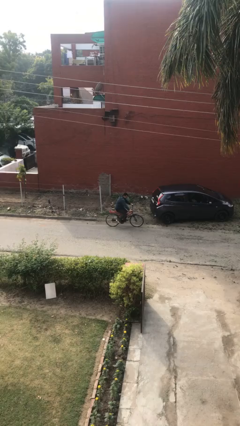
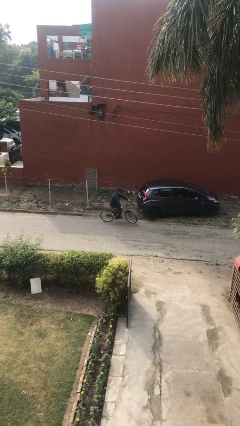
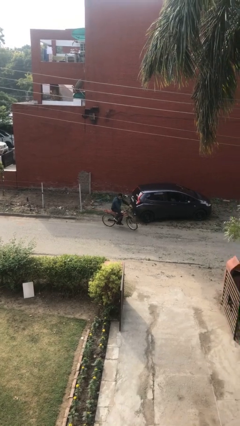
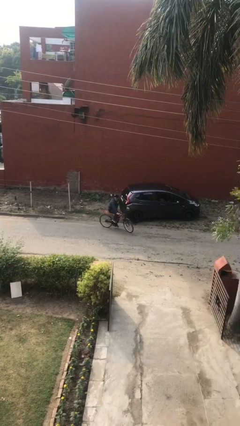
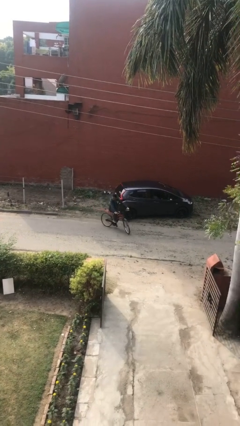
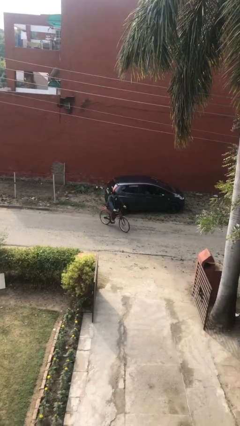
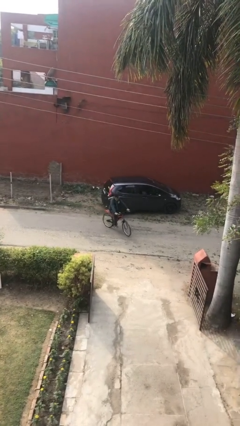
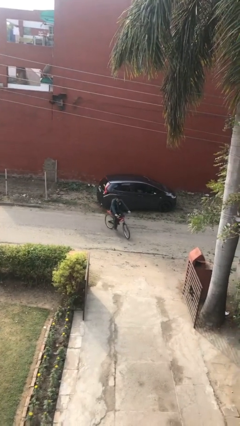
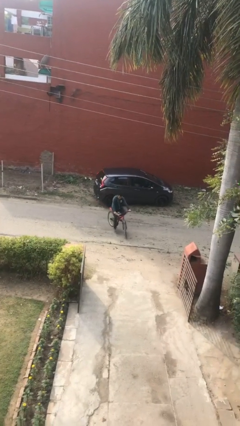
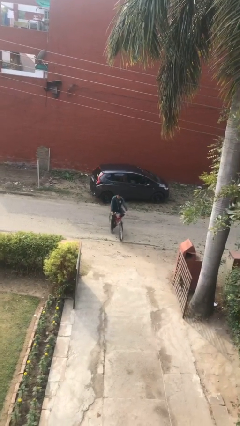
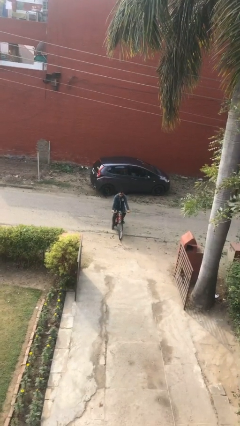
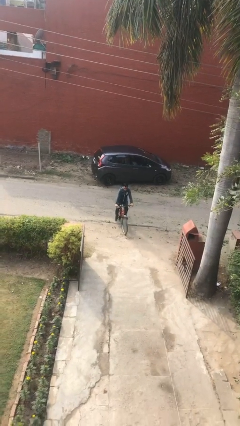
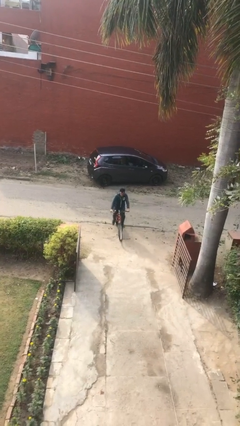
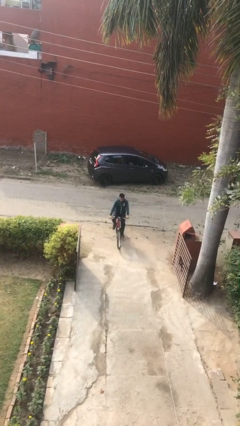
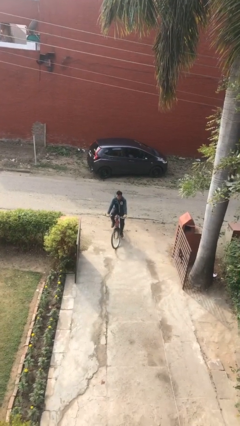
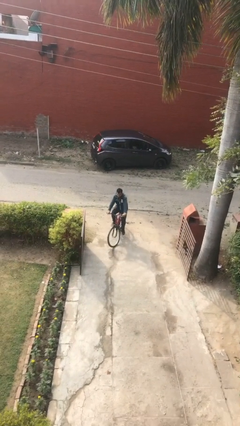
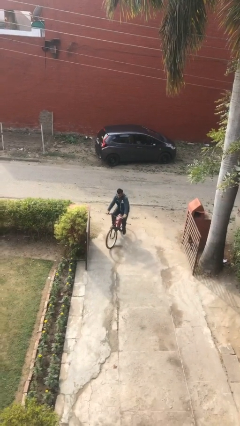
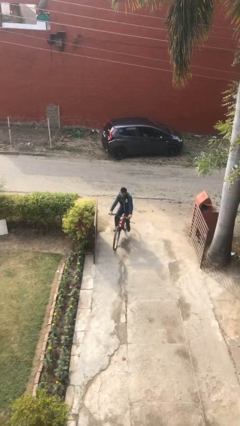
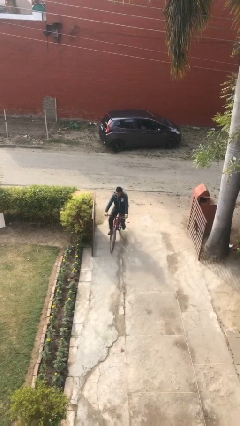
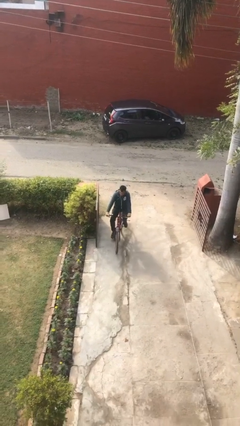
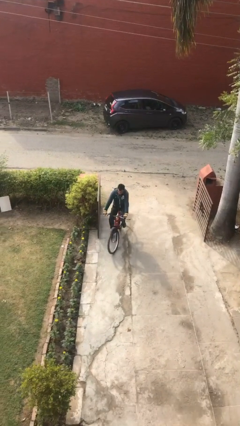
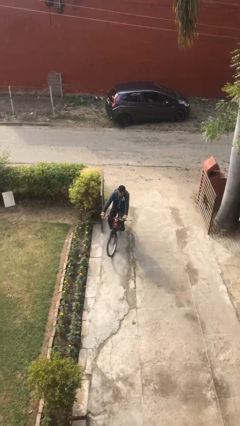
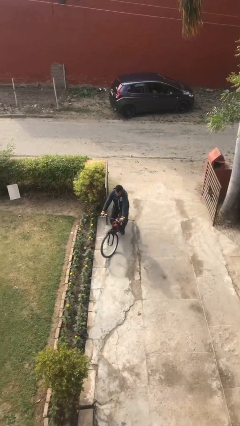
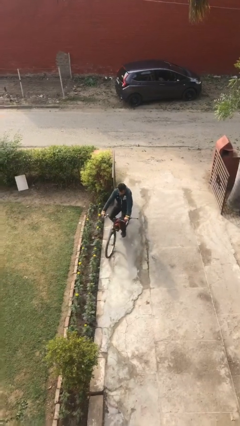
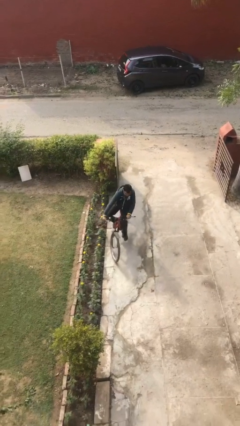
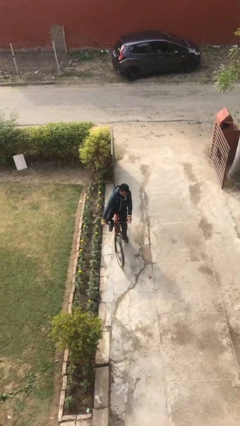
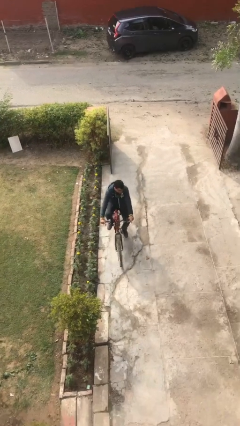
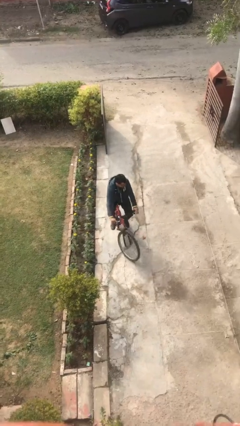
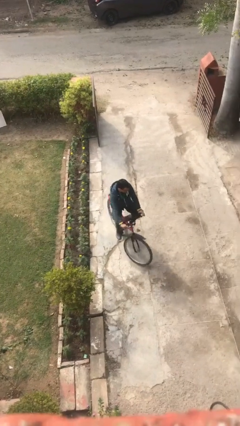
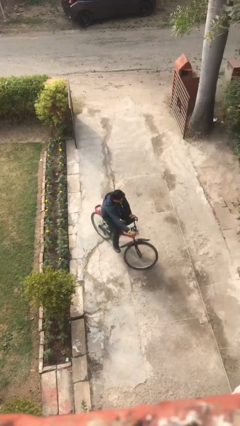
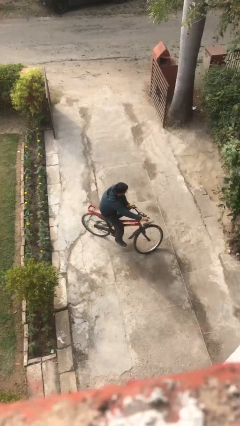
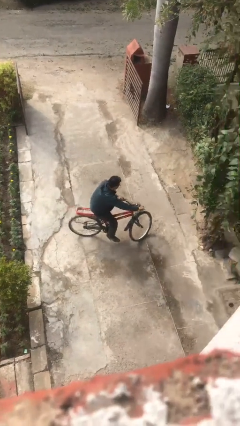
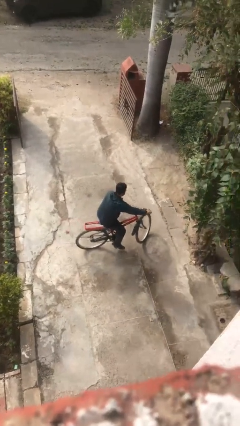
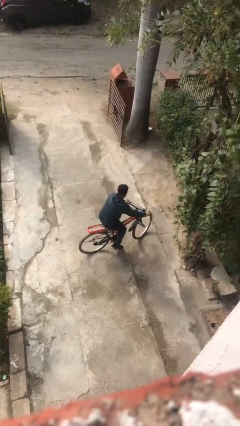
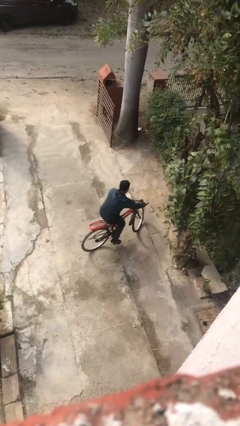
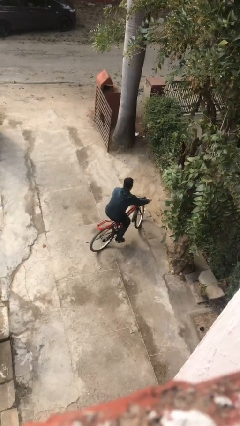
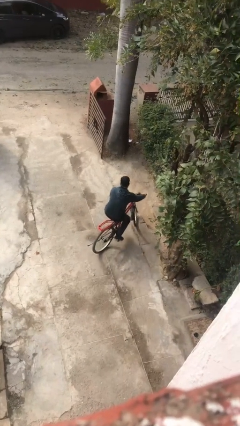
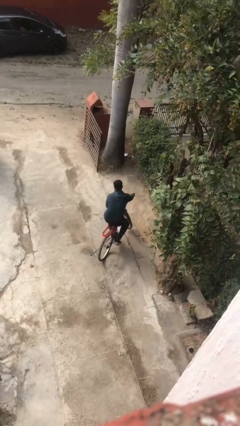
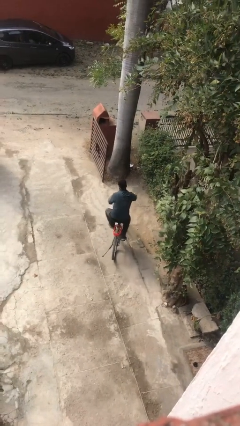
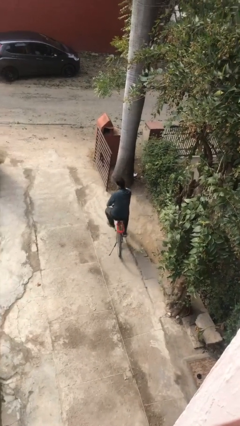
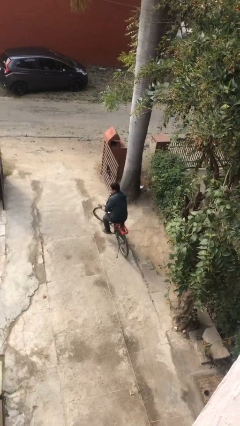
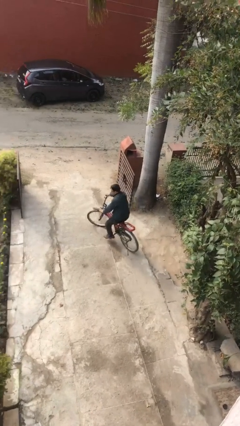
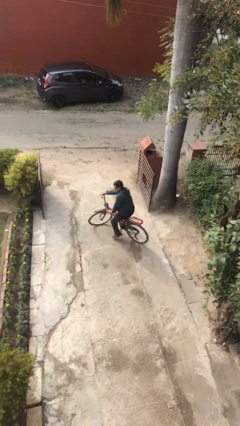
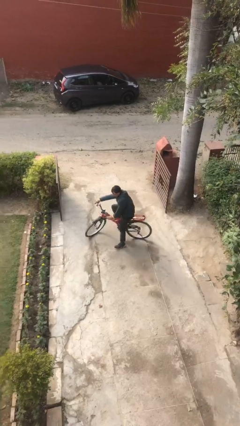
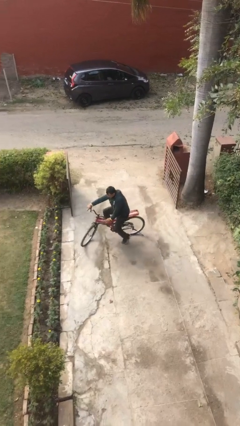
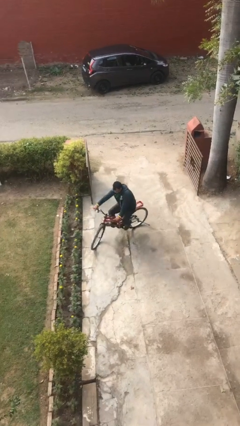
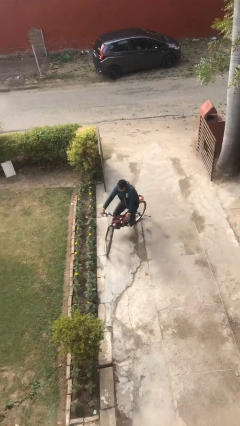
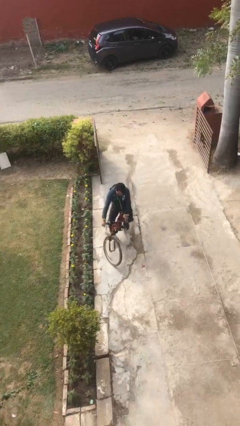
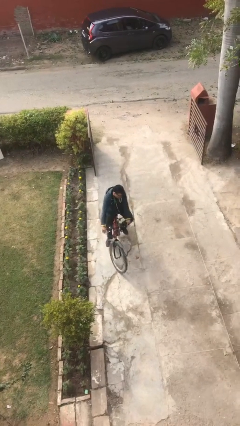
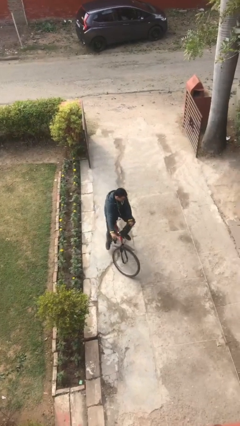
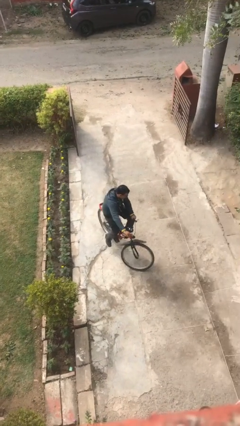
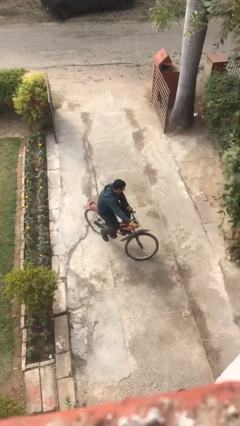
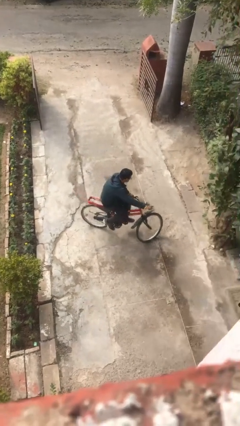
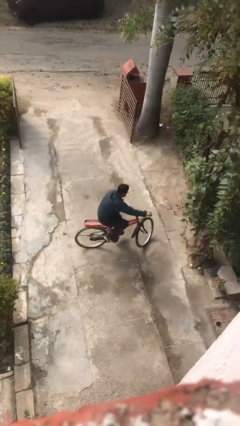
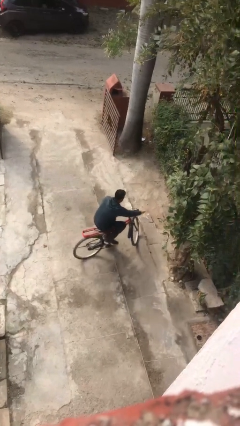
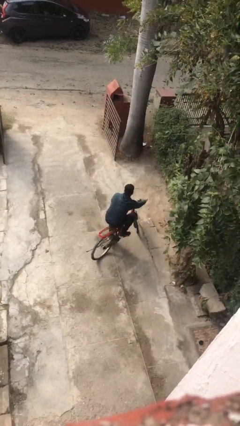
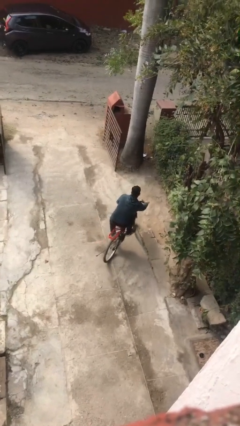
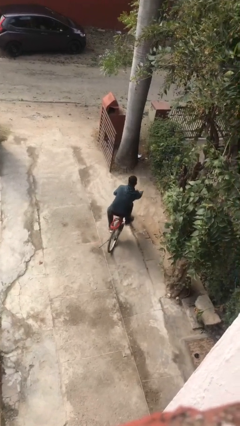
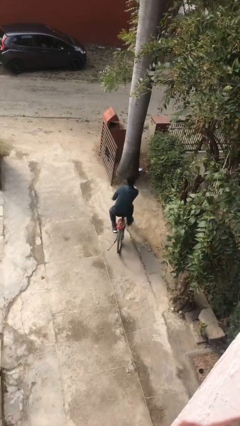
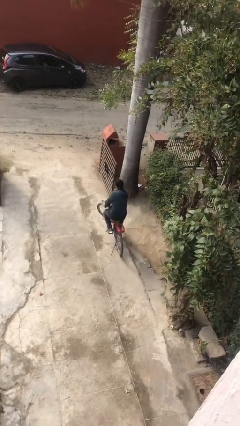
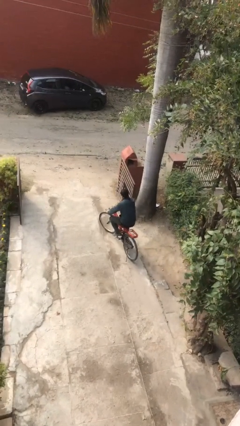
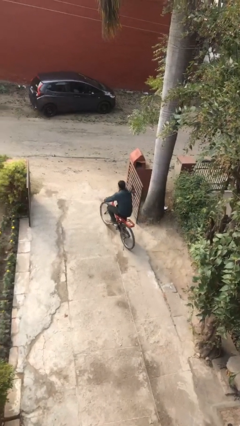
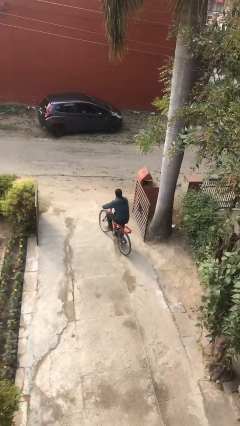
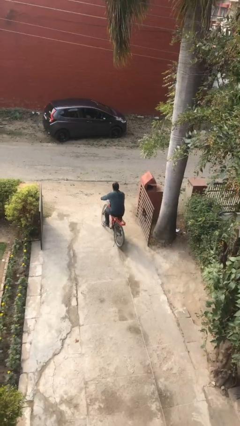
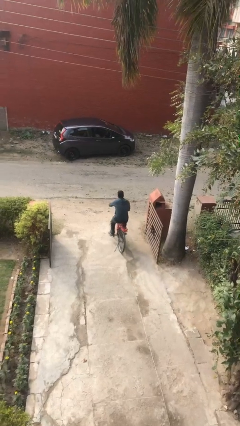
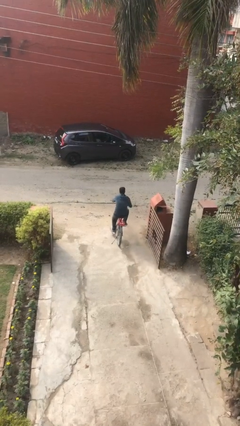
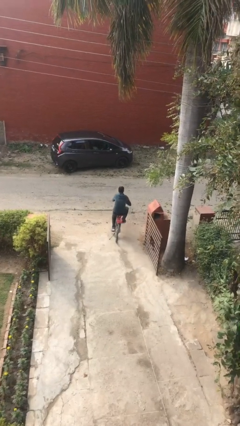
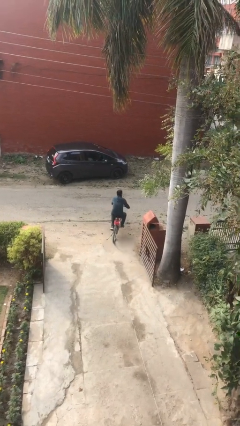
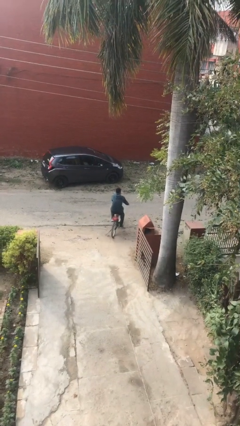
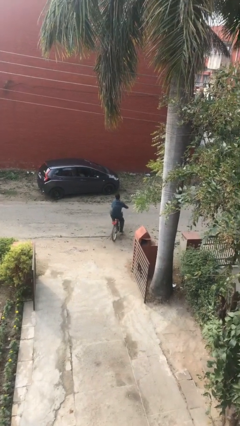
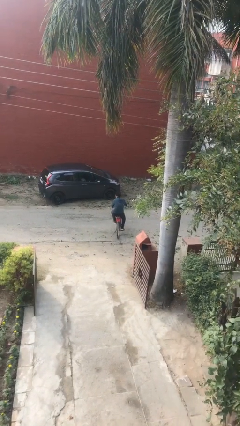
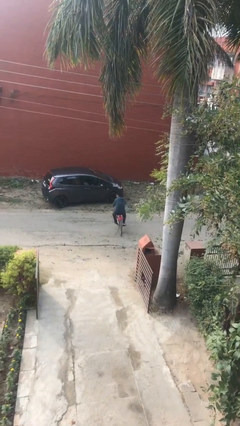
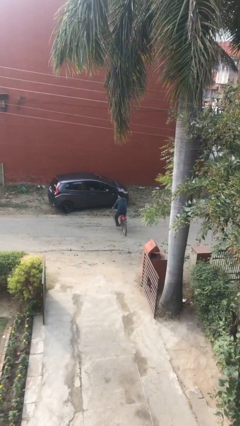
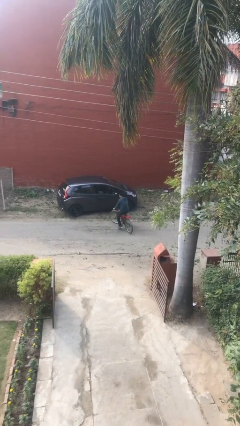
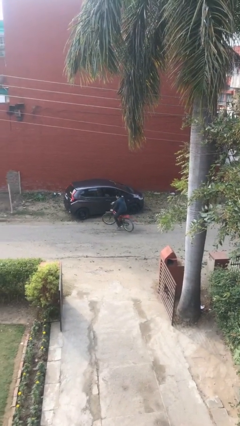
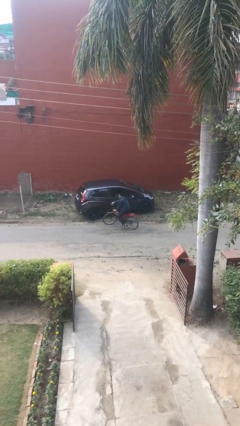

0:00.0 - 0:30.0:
person rides bicycle

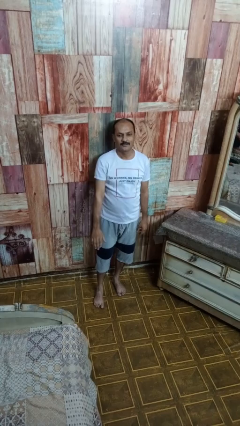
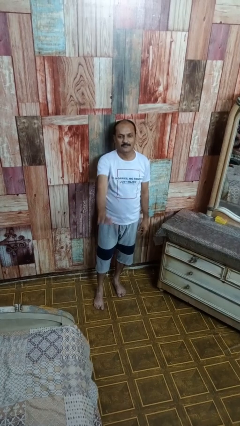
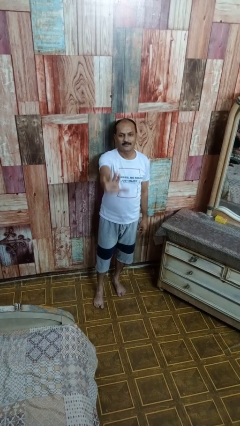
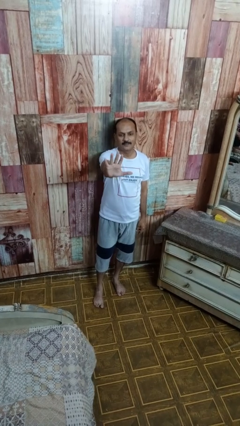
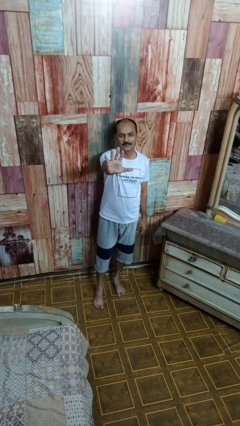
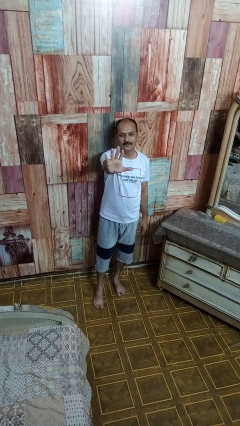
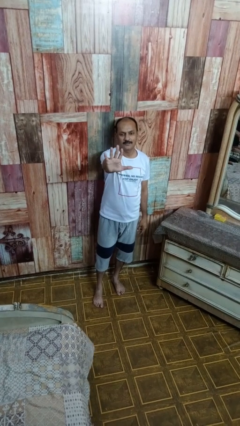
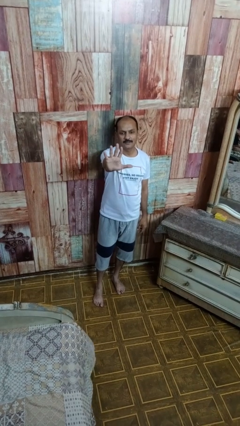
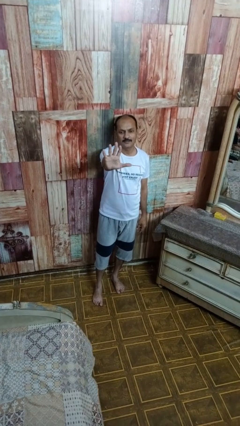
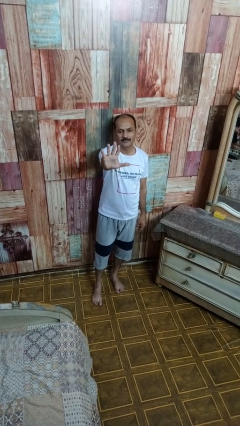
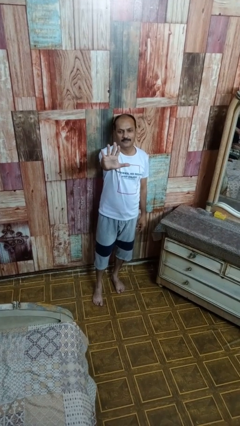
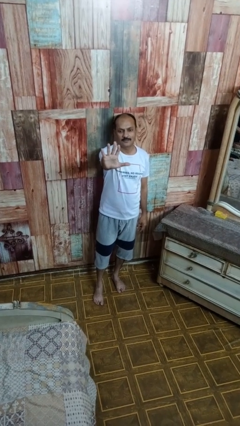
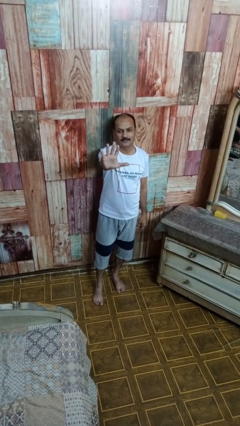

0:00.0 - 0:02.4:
person gestures number five

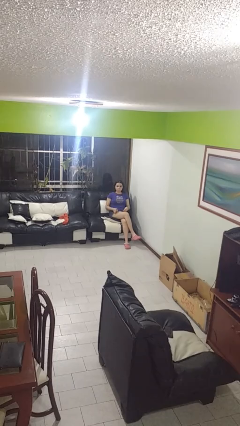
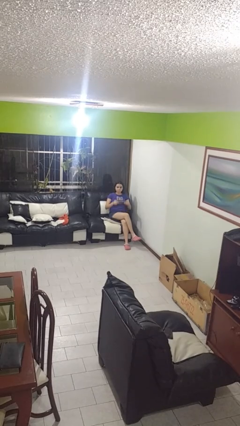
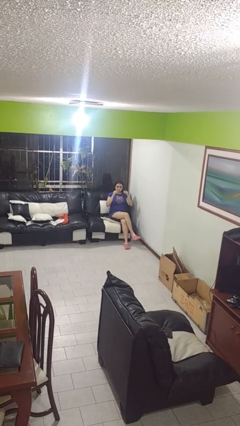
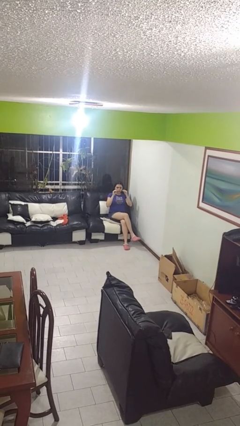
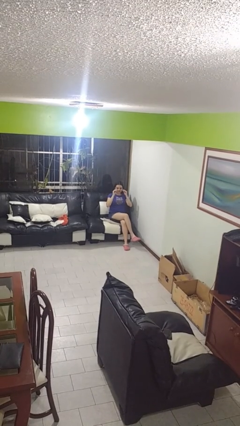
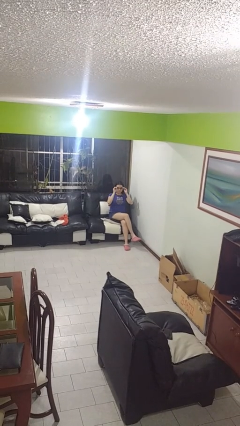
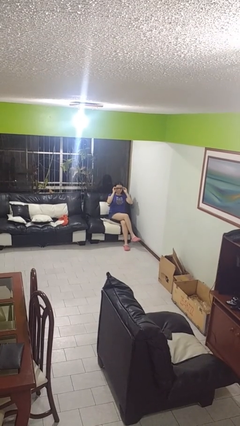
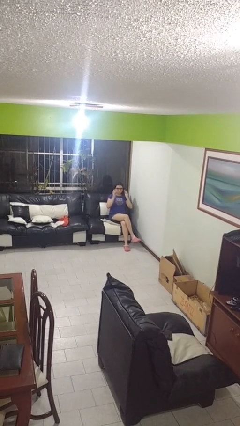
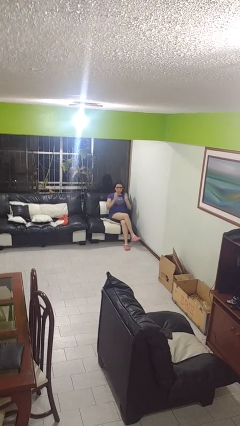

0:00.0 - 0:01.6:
person puts on glasses
